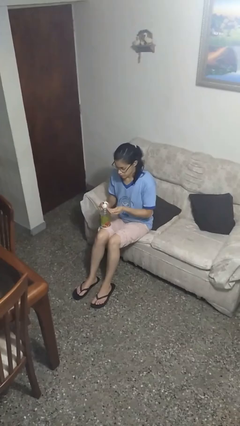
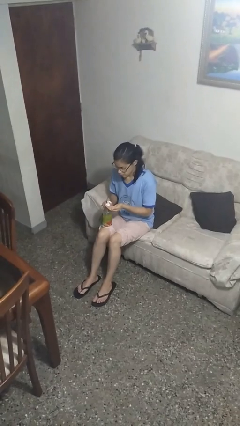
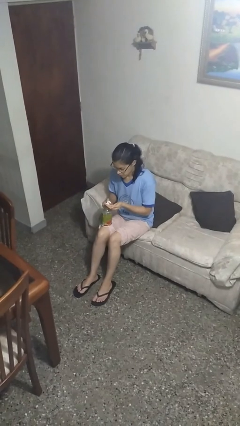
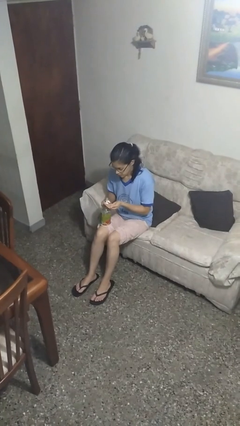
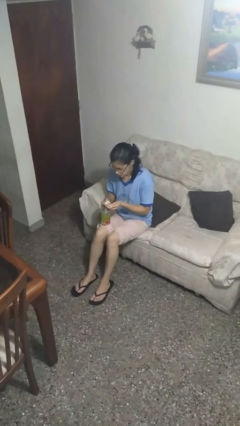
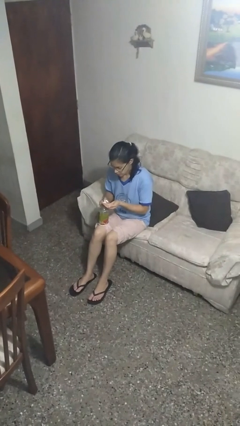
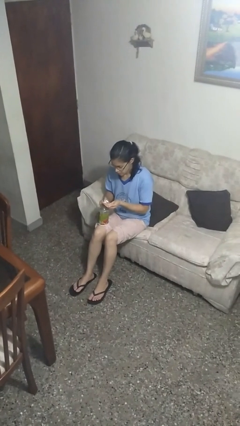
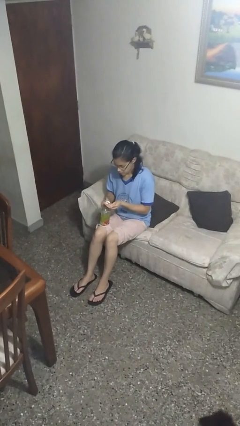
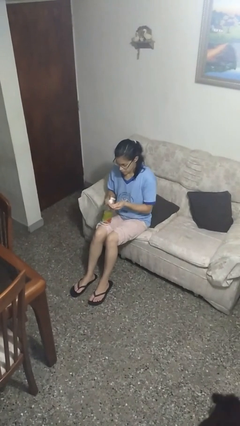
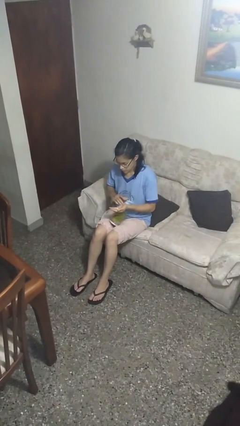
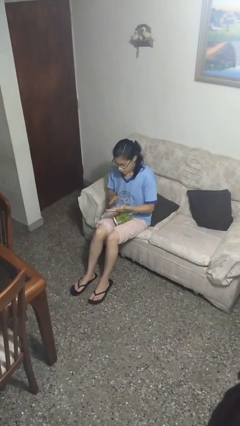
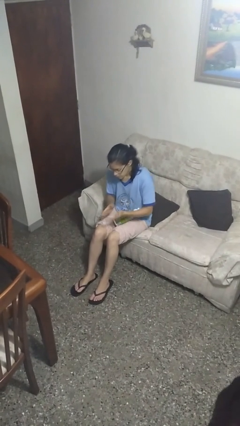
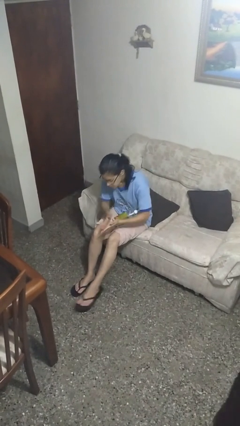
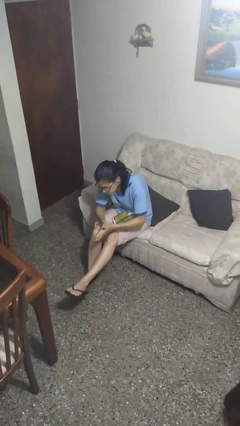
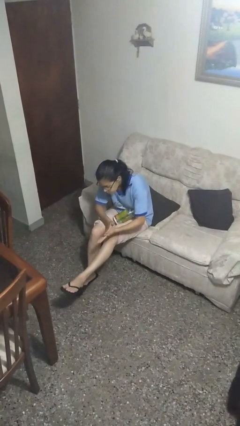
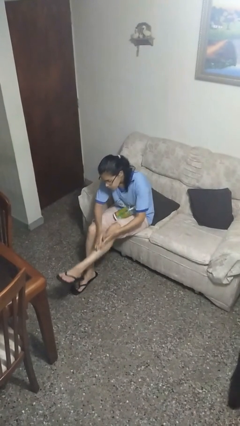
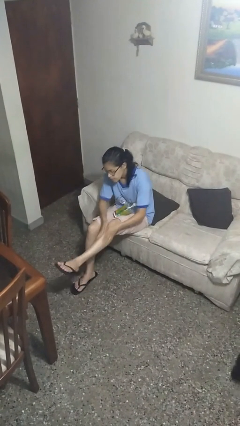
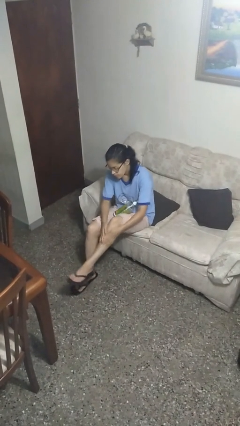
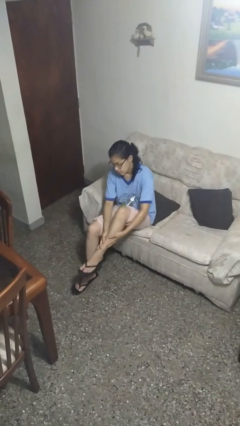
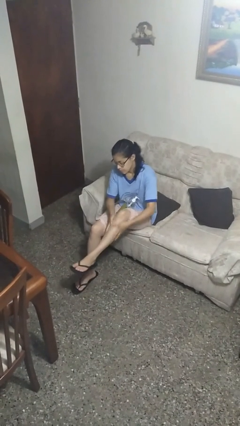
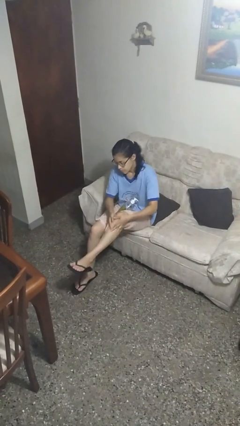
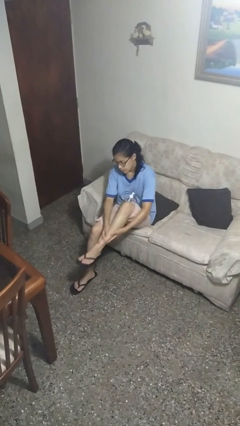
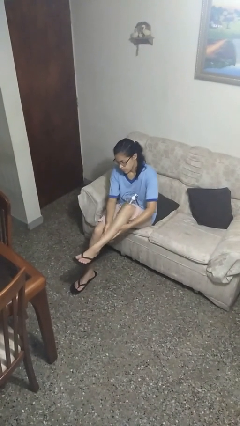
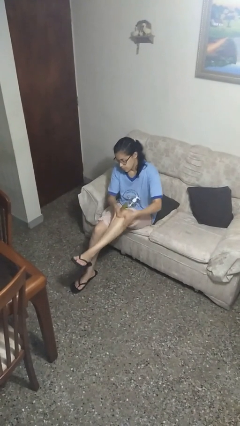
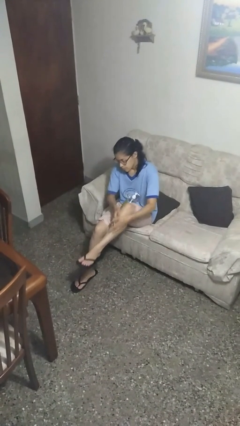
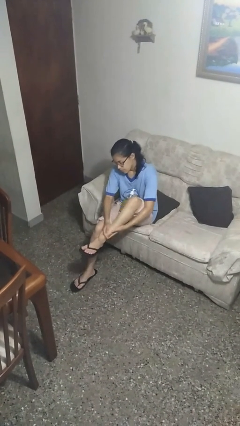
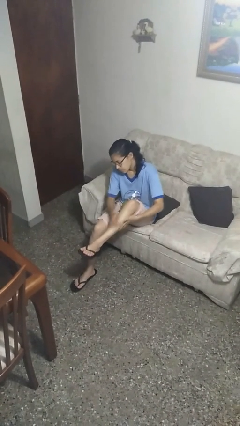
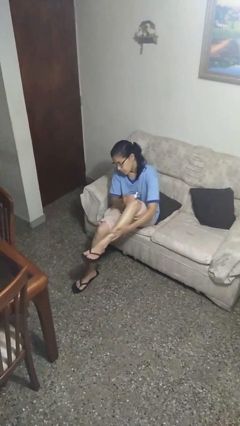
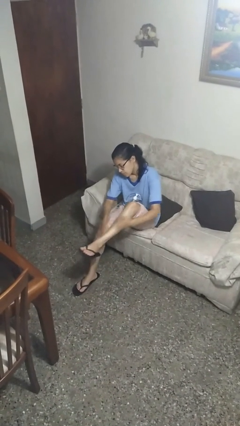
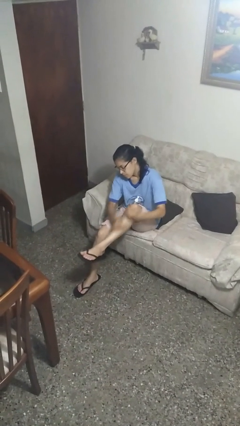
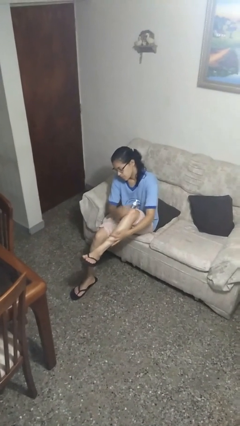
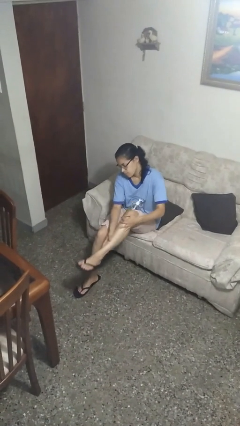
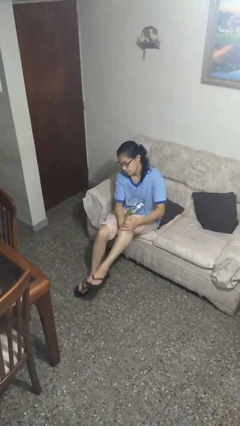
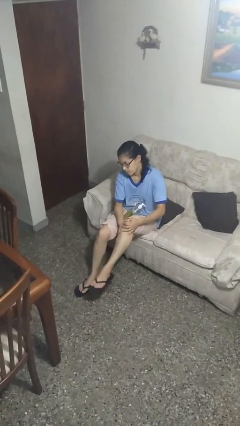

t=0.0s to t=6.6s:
person applies sunscreen

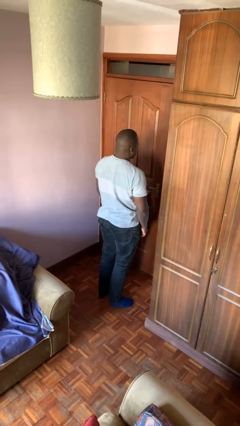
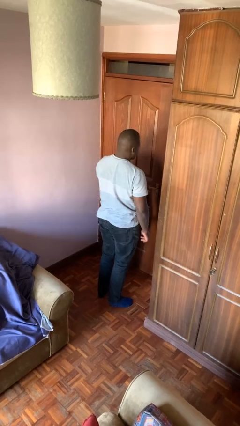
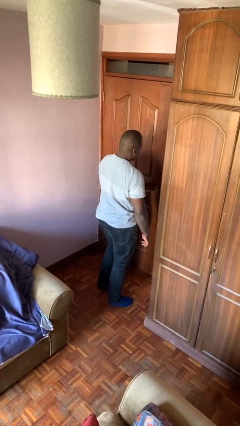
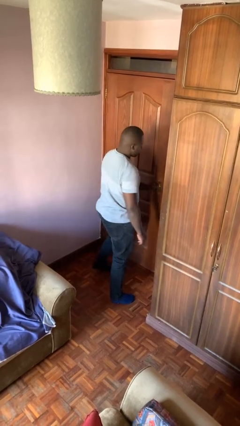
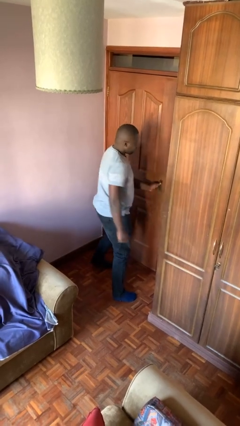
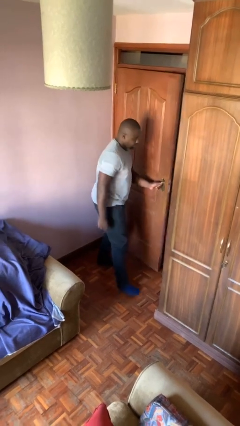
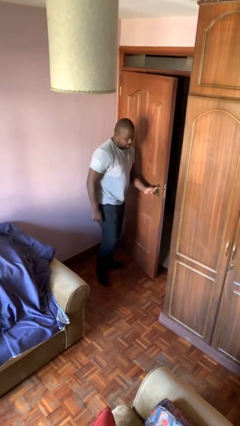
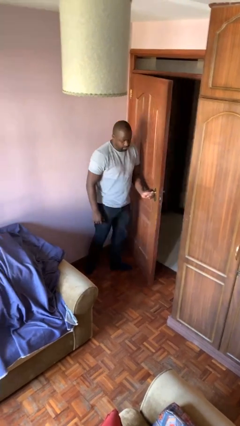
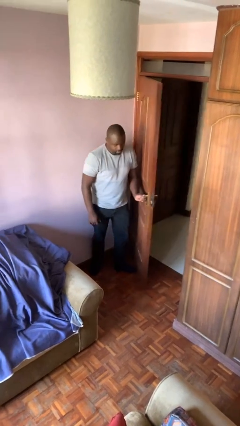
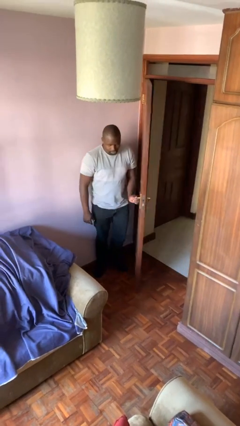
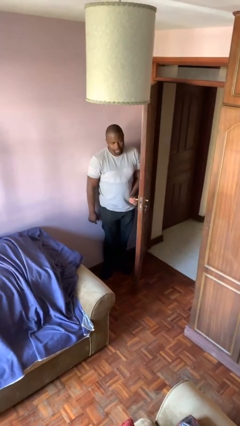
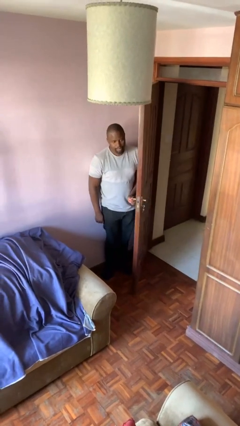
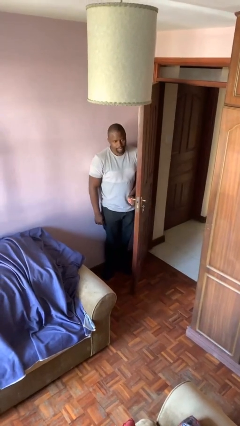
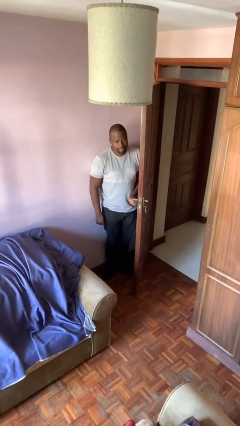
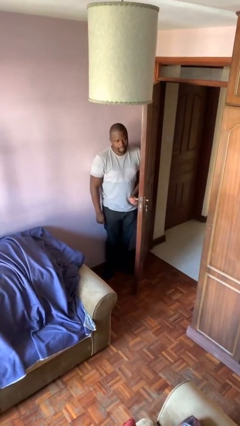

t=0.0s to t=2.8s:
person opens facility door

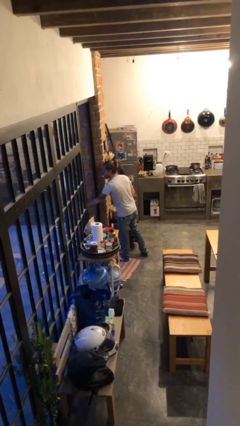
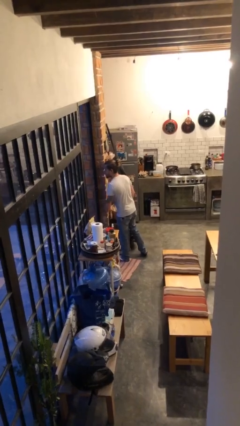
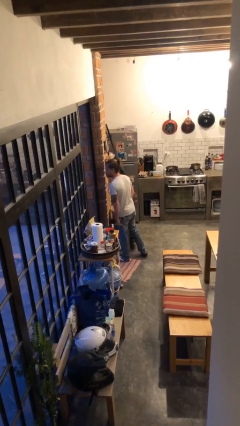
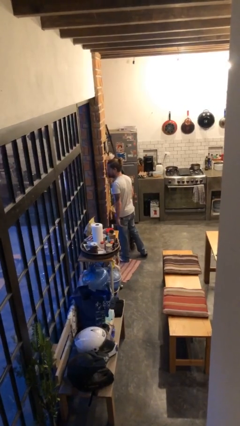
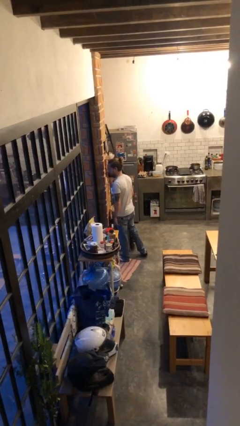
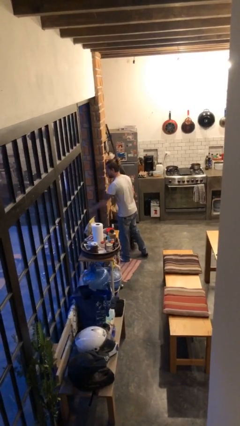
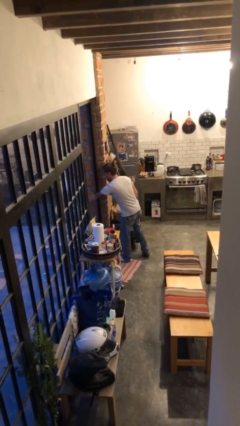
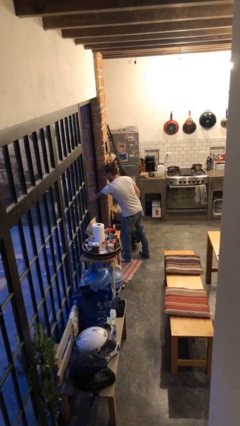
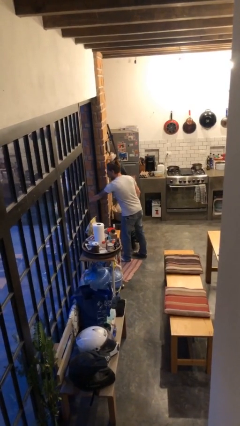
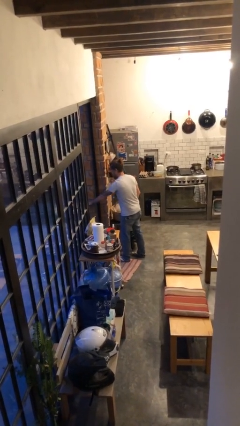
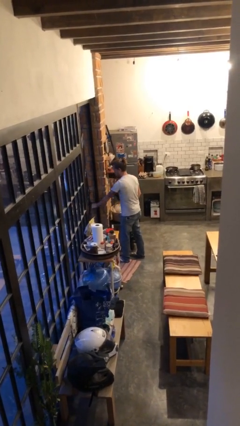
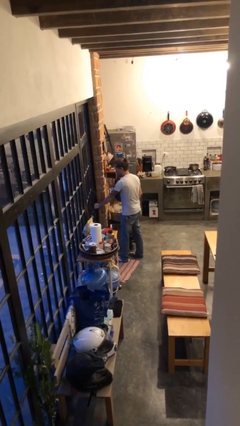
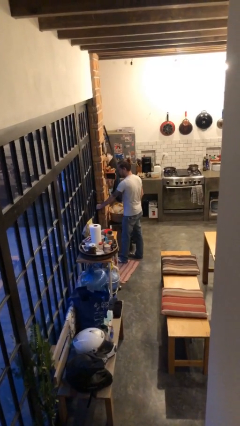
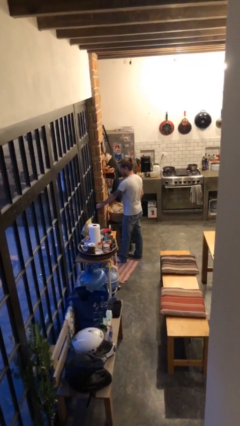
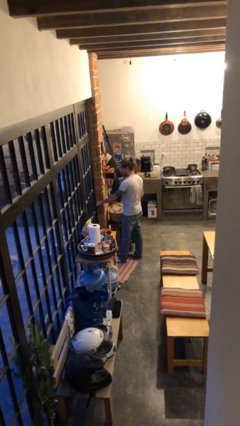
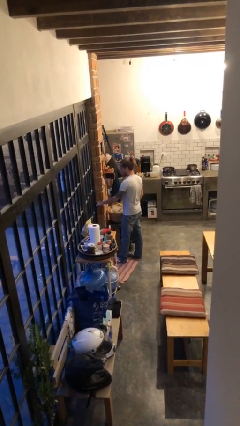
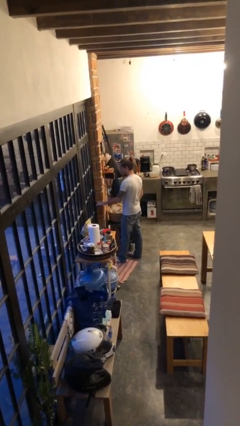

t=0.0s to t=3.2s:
person closes facility door

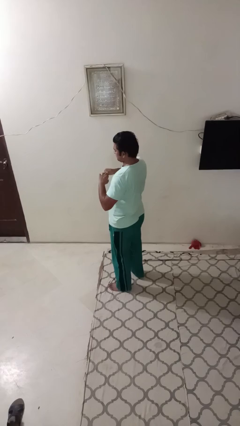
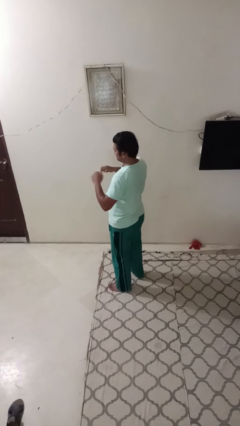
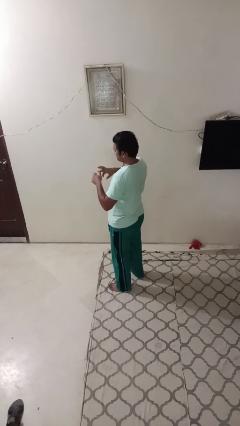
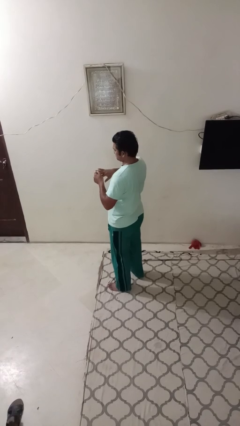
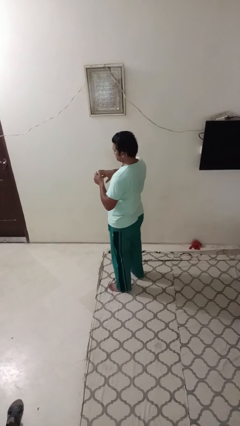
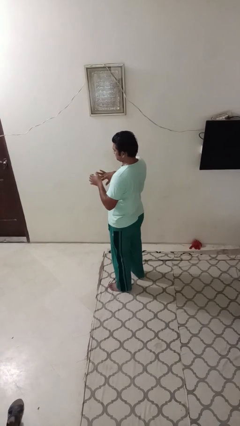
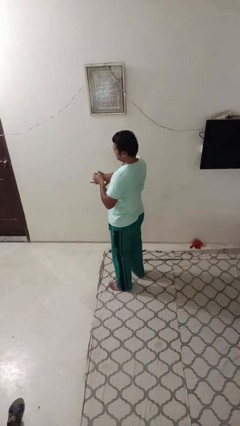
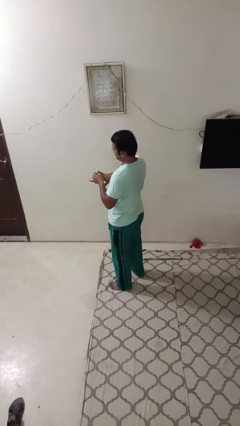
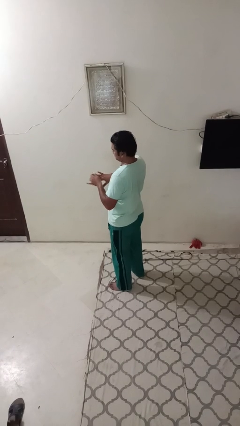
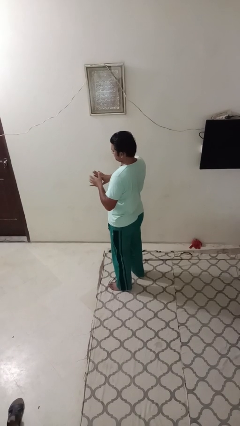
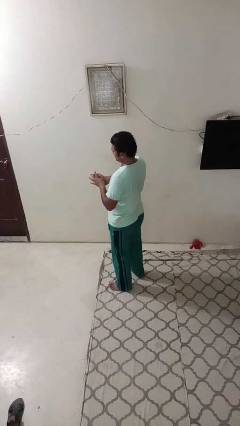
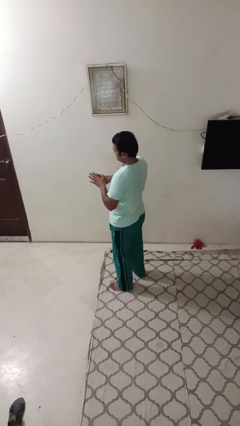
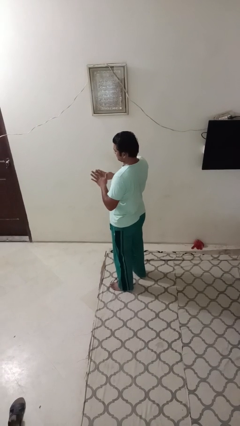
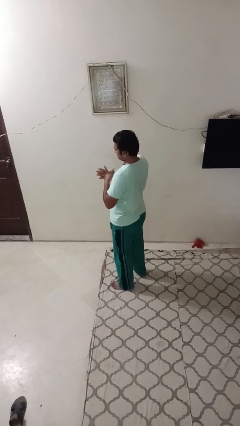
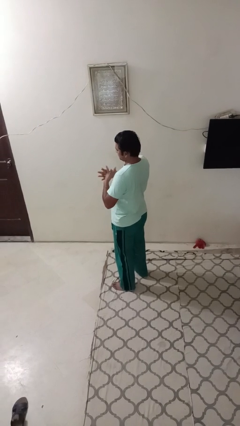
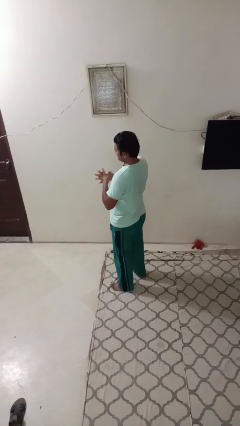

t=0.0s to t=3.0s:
person cracks knuckles

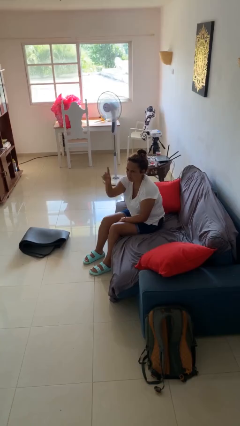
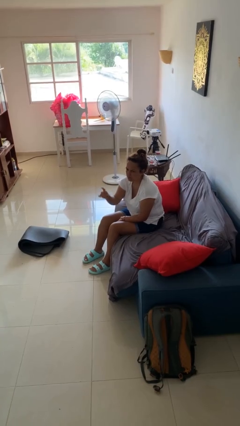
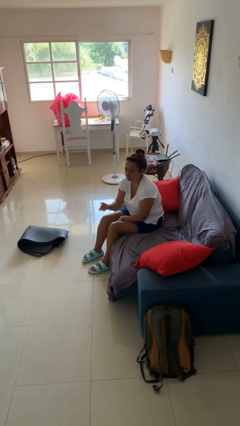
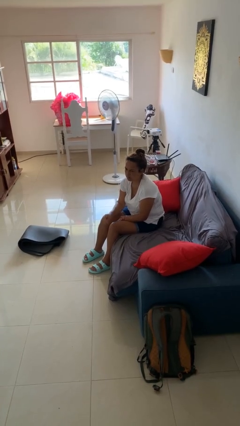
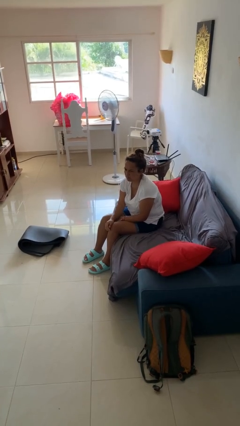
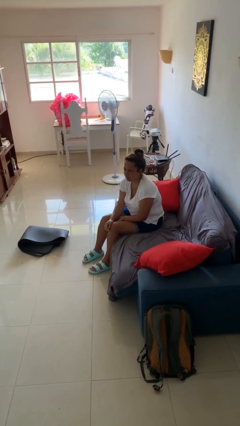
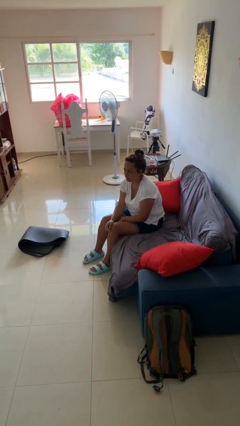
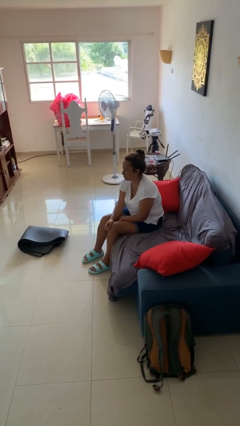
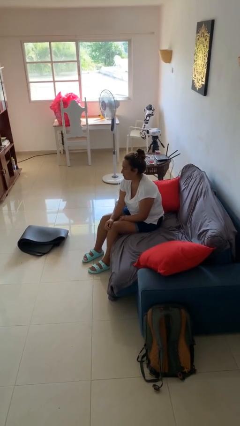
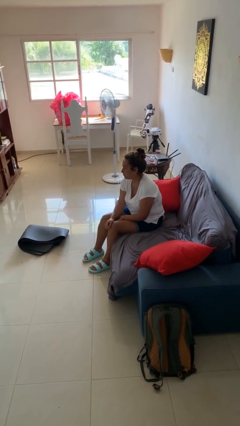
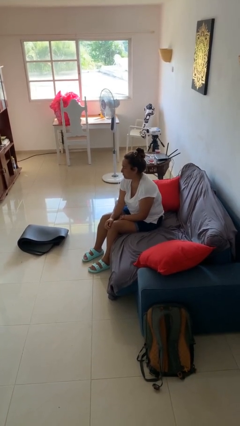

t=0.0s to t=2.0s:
person gestures lower hand
